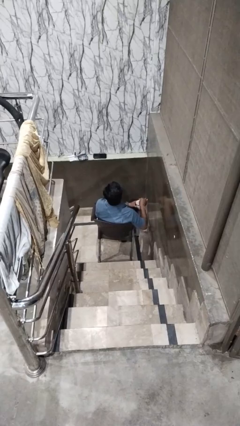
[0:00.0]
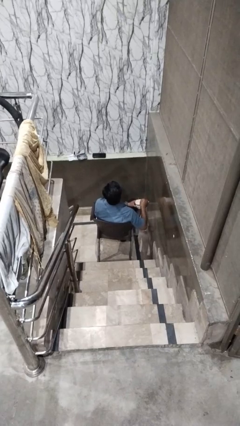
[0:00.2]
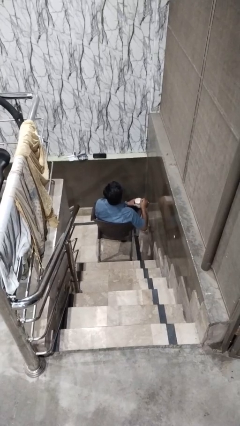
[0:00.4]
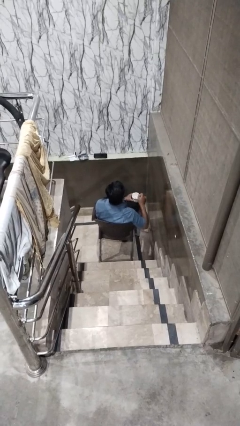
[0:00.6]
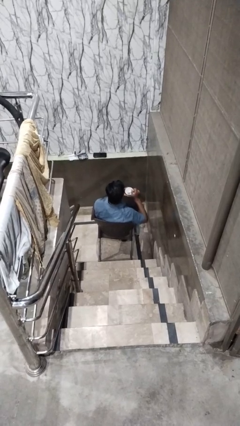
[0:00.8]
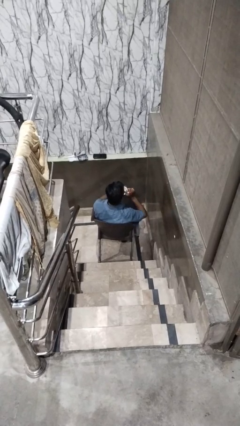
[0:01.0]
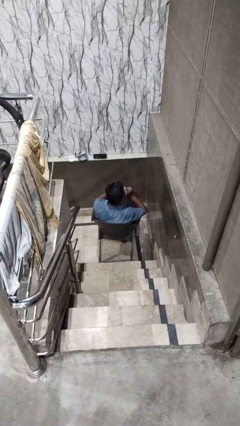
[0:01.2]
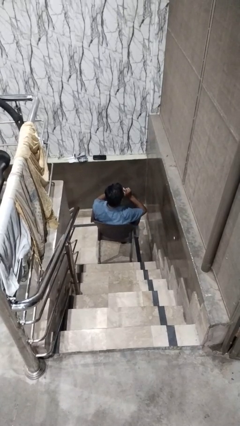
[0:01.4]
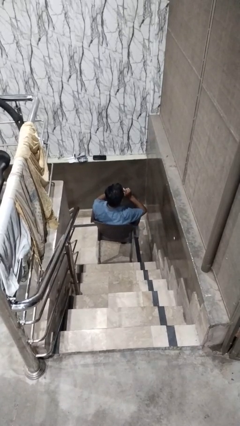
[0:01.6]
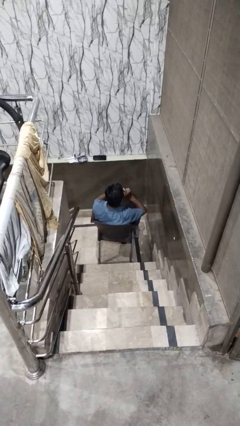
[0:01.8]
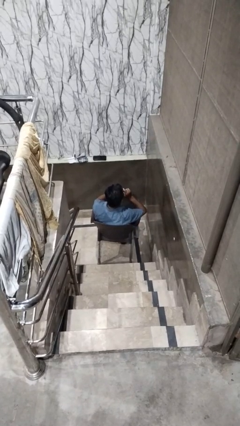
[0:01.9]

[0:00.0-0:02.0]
person drinks from mug

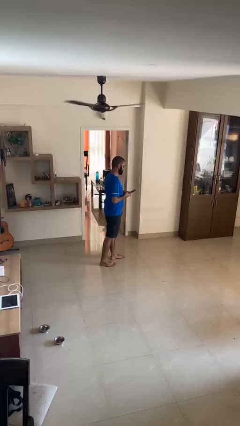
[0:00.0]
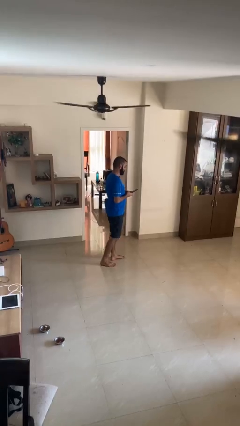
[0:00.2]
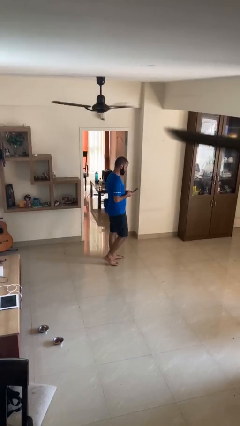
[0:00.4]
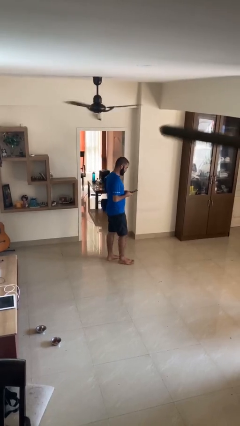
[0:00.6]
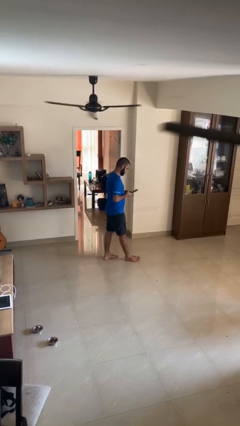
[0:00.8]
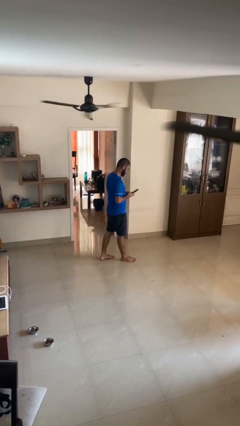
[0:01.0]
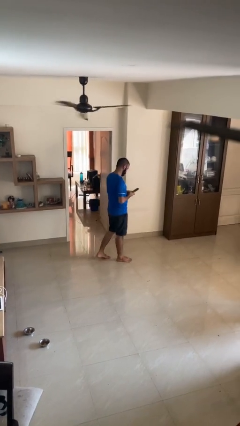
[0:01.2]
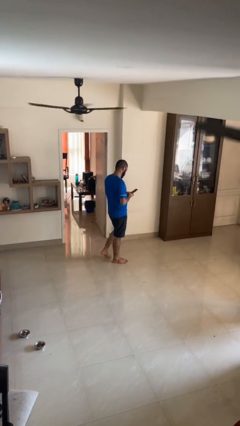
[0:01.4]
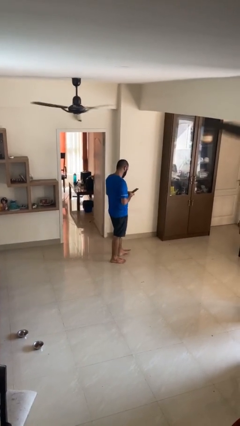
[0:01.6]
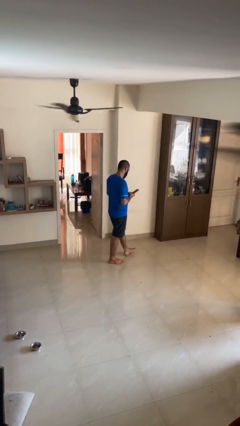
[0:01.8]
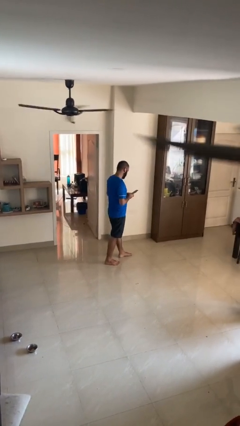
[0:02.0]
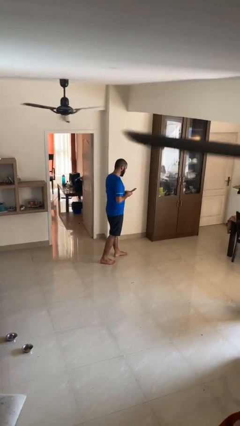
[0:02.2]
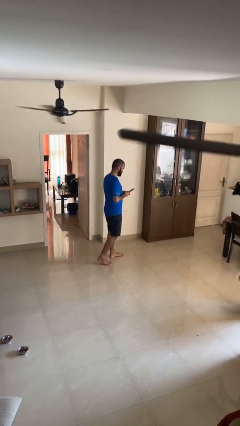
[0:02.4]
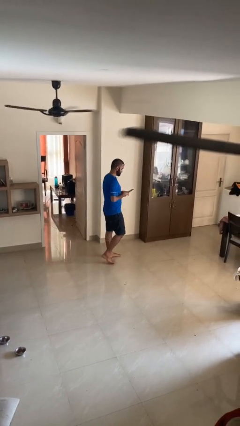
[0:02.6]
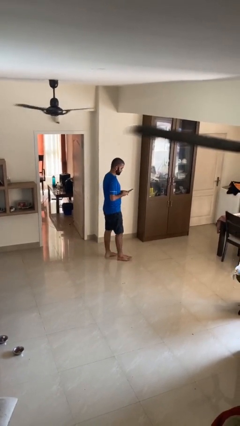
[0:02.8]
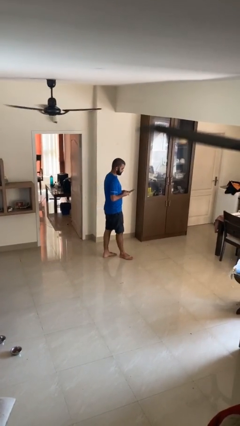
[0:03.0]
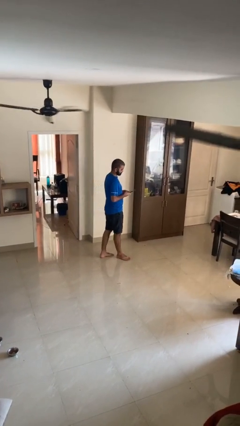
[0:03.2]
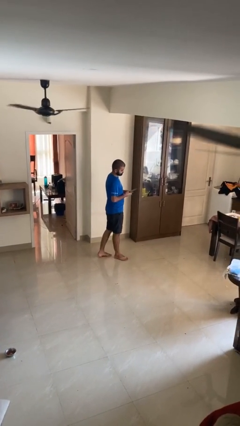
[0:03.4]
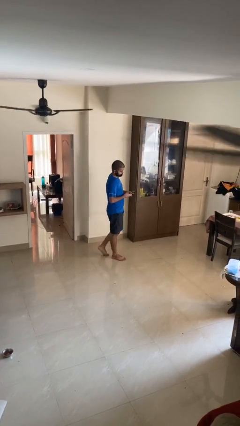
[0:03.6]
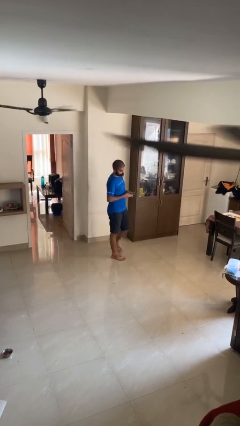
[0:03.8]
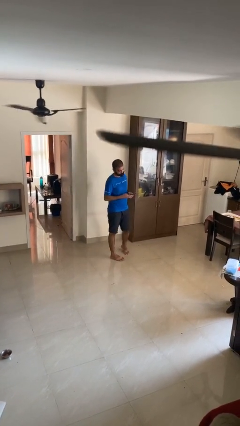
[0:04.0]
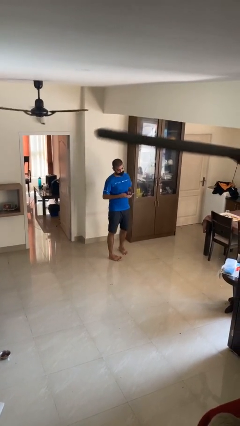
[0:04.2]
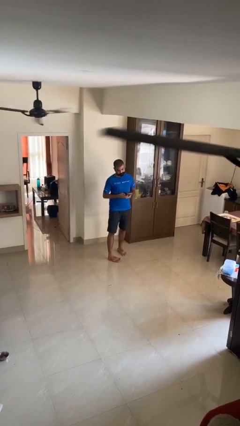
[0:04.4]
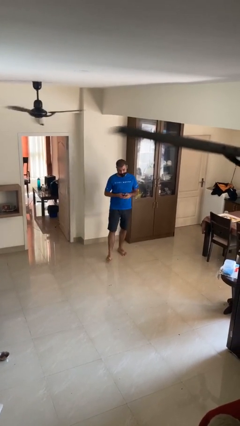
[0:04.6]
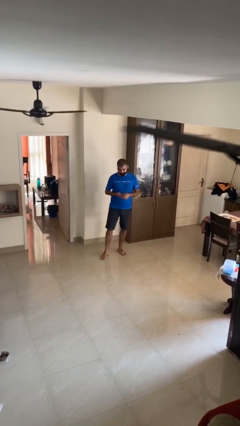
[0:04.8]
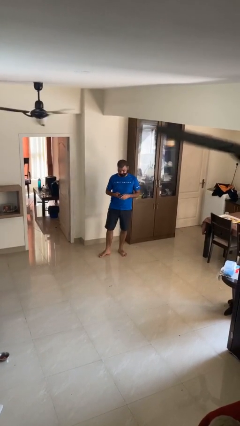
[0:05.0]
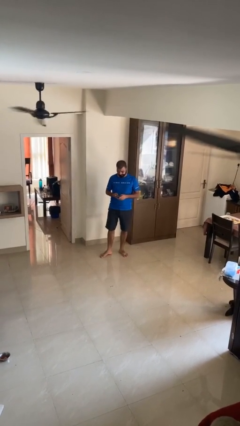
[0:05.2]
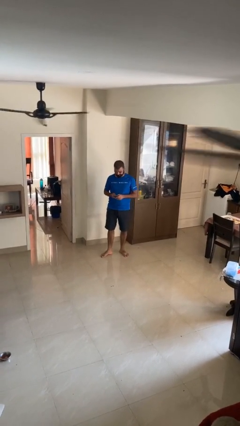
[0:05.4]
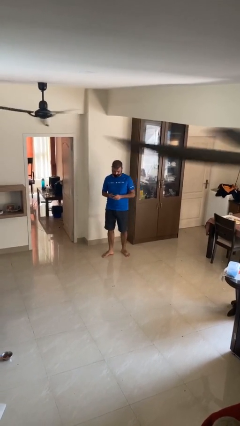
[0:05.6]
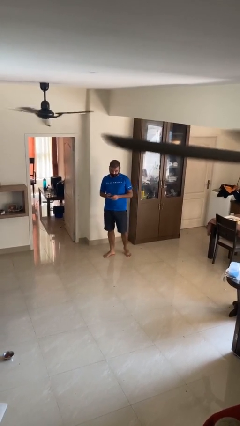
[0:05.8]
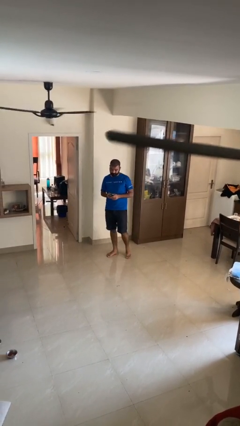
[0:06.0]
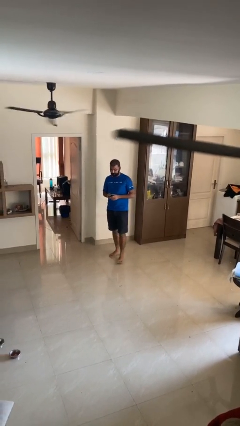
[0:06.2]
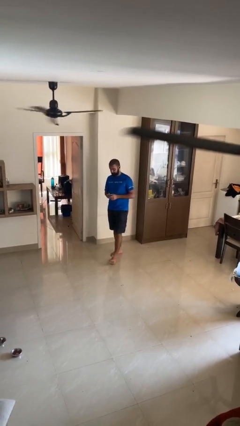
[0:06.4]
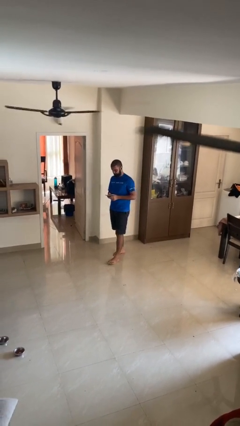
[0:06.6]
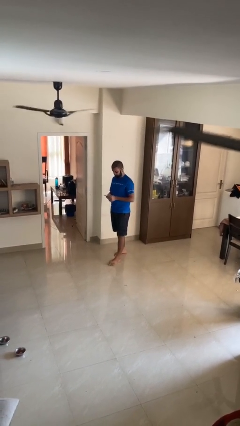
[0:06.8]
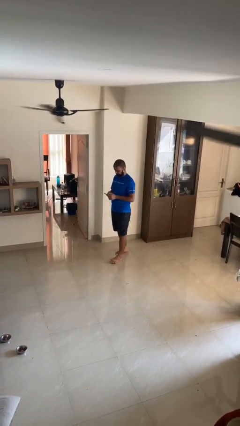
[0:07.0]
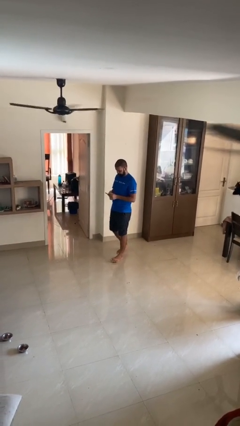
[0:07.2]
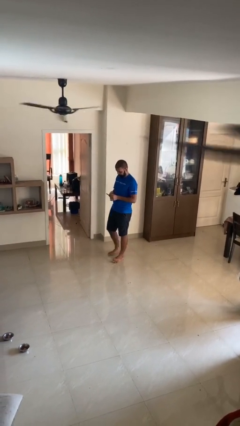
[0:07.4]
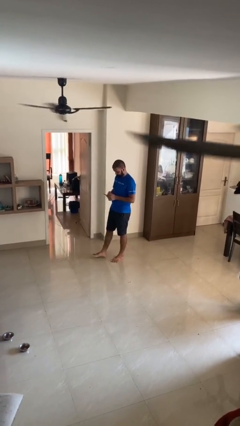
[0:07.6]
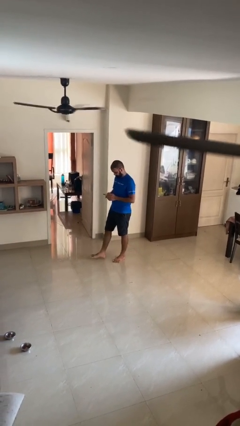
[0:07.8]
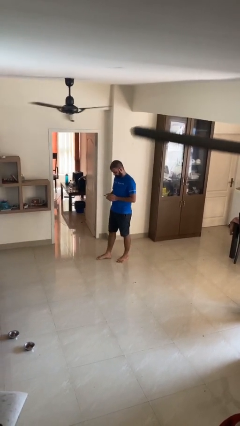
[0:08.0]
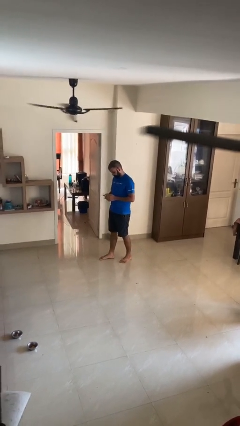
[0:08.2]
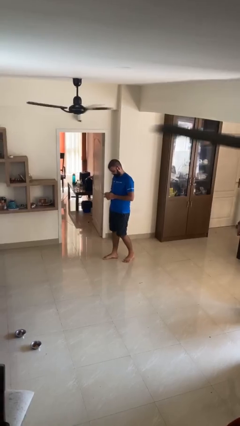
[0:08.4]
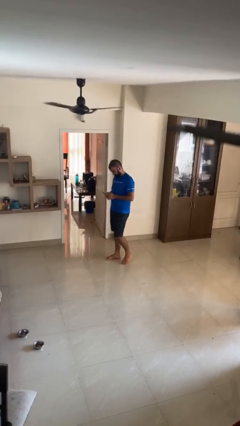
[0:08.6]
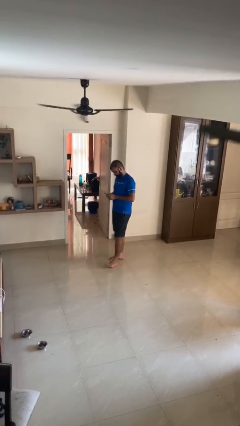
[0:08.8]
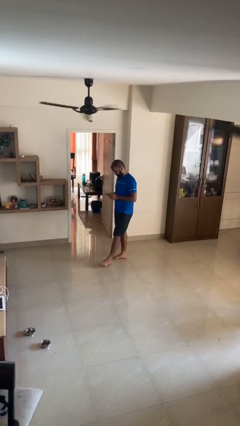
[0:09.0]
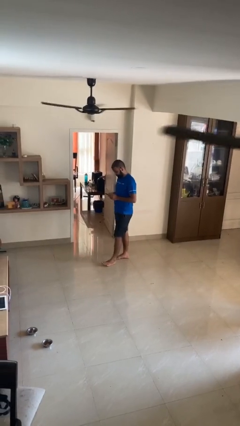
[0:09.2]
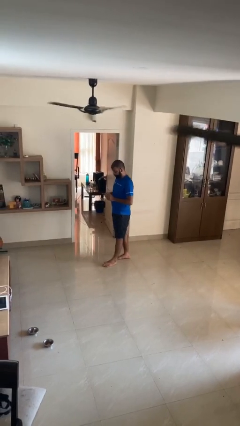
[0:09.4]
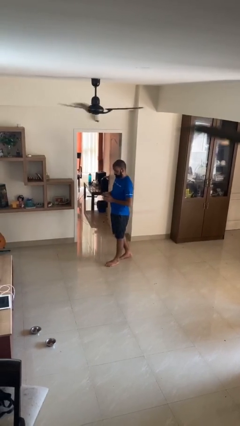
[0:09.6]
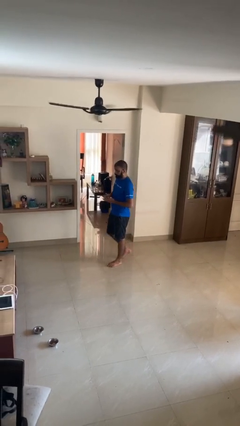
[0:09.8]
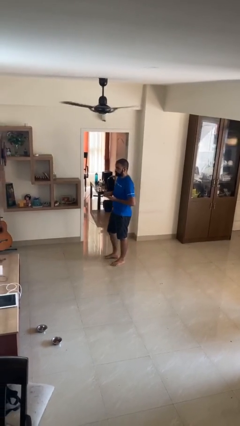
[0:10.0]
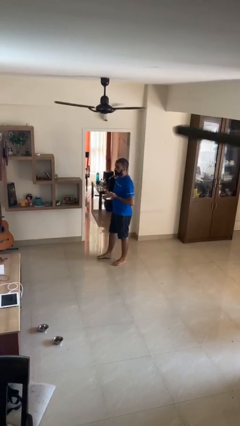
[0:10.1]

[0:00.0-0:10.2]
person texts on phone

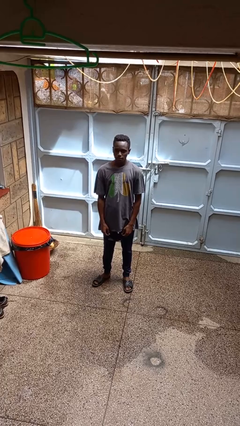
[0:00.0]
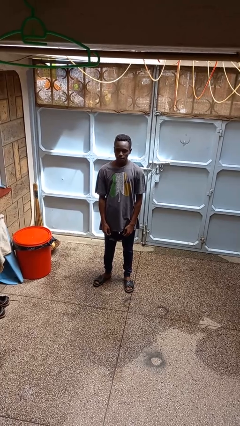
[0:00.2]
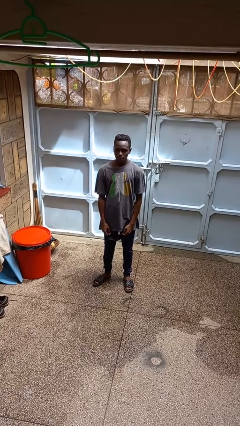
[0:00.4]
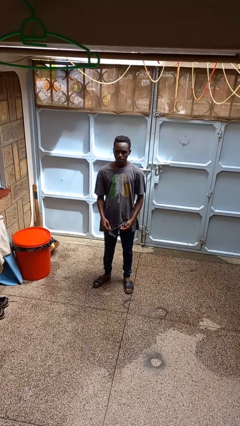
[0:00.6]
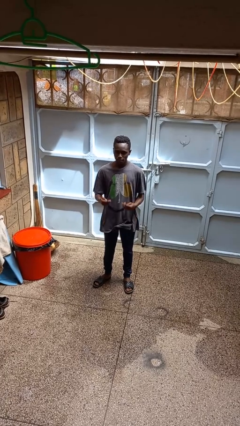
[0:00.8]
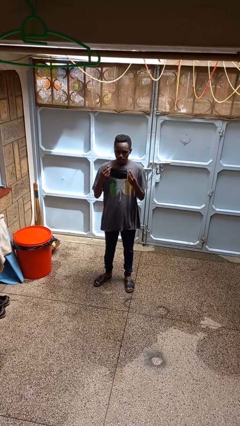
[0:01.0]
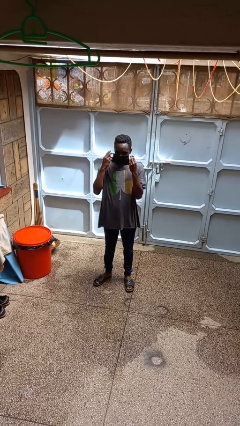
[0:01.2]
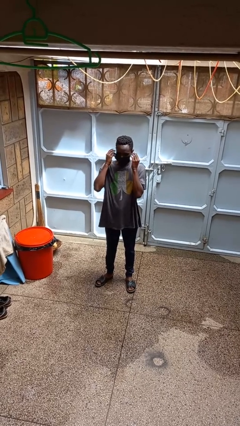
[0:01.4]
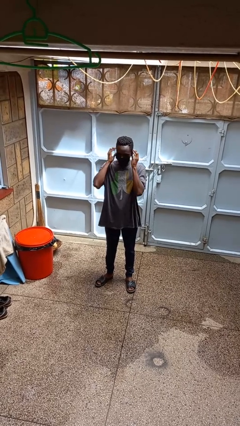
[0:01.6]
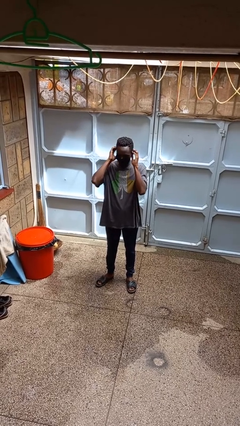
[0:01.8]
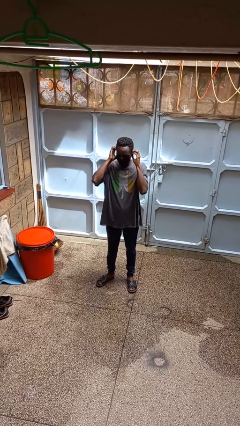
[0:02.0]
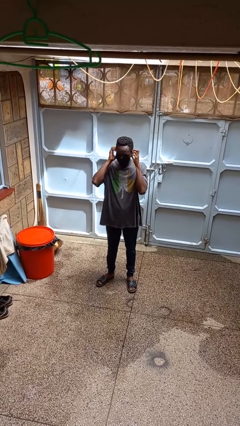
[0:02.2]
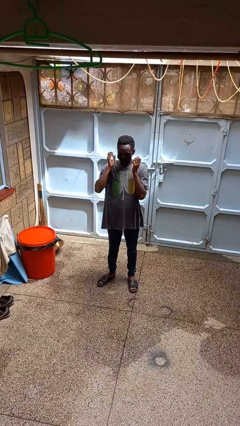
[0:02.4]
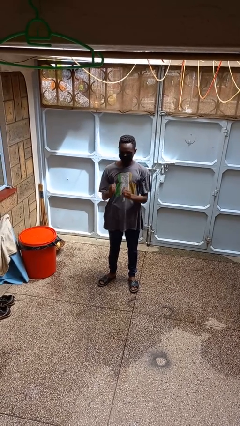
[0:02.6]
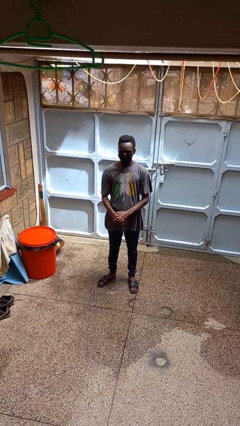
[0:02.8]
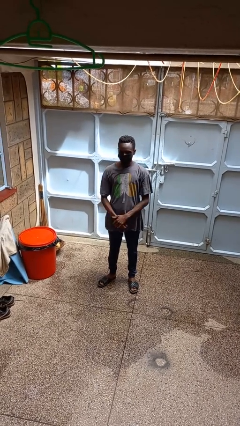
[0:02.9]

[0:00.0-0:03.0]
person puts on facemask

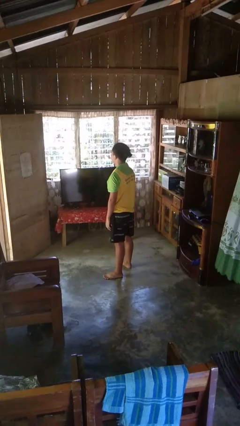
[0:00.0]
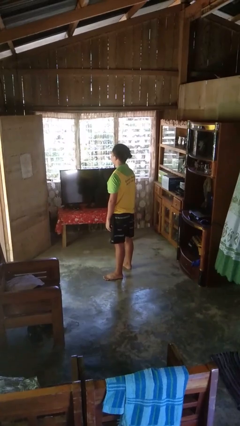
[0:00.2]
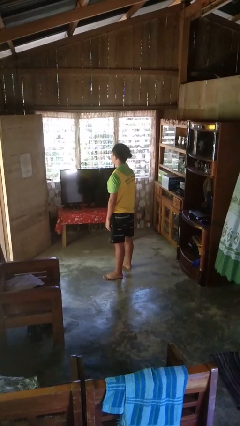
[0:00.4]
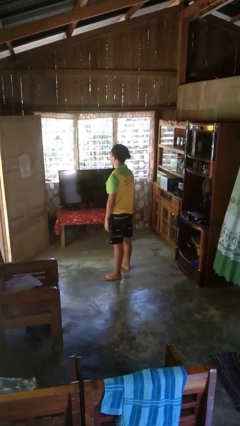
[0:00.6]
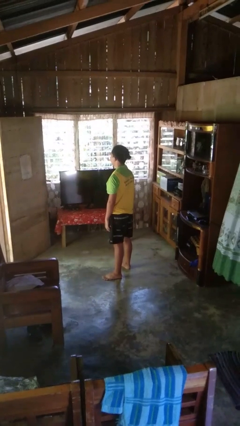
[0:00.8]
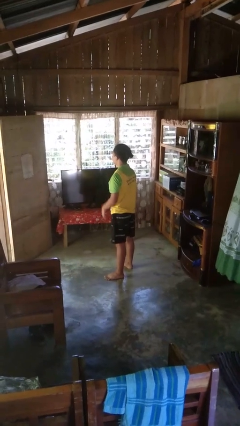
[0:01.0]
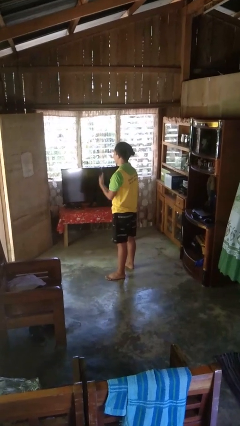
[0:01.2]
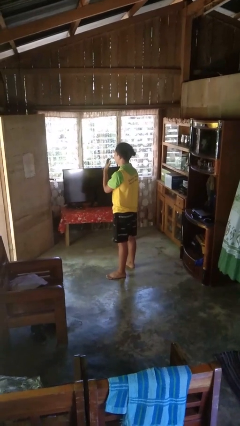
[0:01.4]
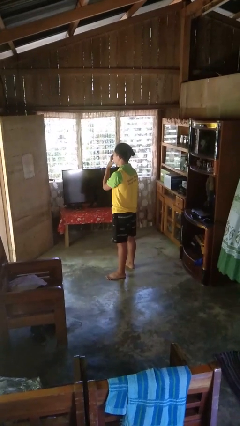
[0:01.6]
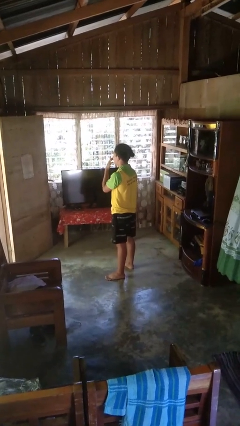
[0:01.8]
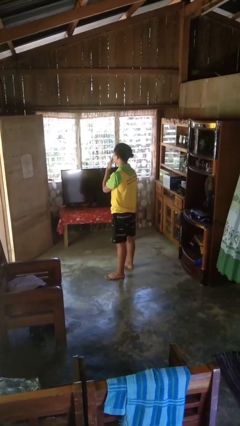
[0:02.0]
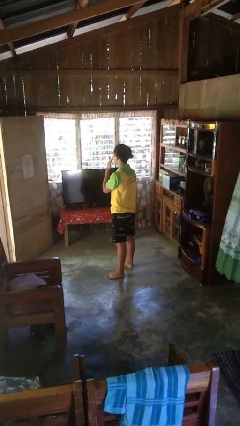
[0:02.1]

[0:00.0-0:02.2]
person licks fingers

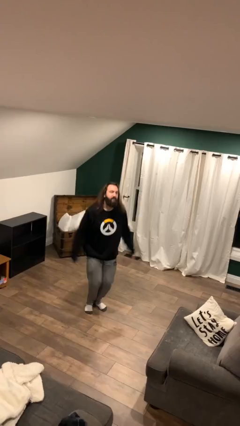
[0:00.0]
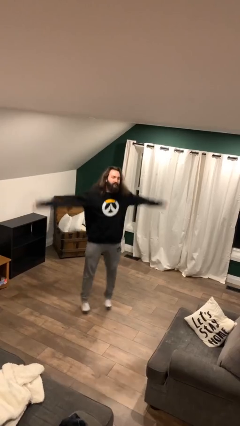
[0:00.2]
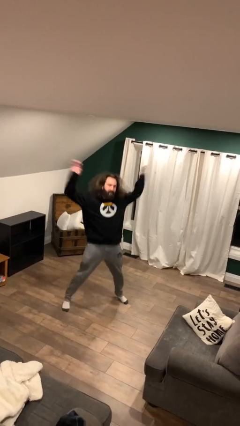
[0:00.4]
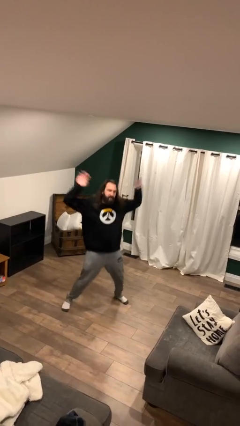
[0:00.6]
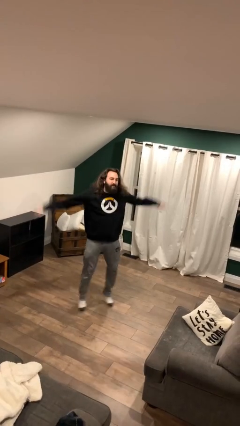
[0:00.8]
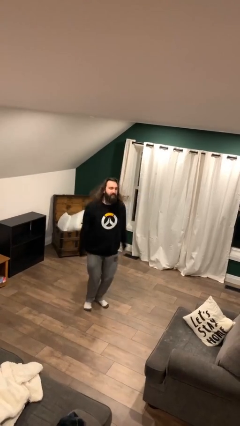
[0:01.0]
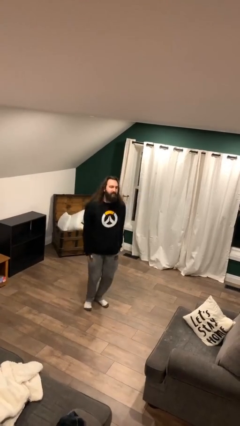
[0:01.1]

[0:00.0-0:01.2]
person exercises with jumping jacks
